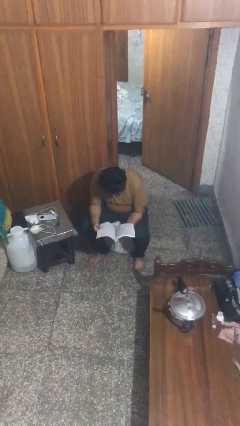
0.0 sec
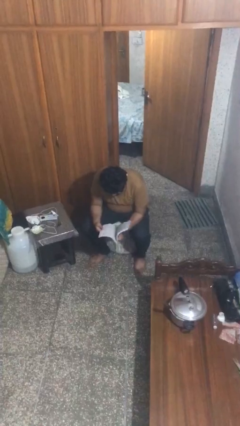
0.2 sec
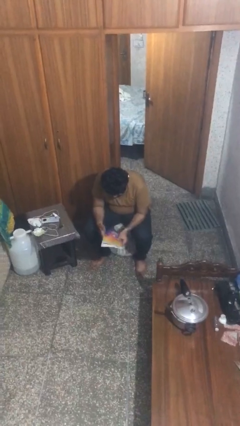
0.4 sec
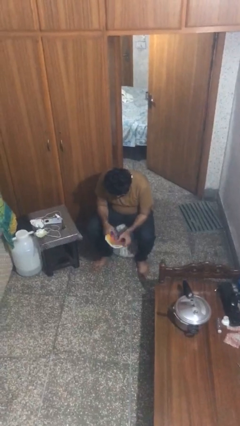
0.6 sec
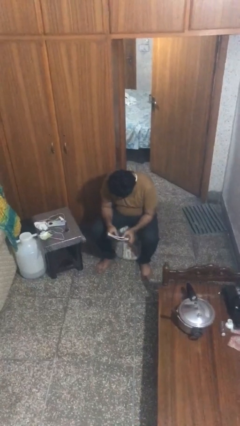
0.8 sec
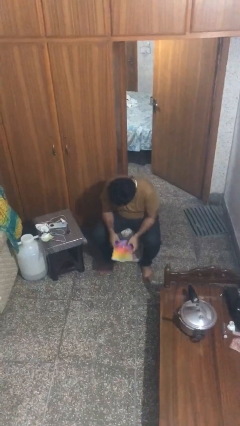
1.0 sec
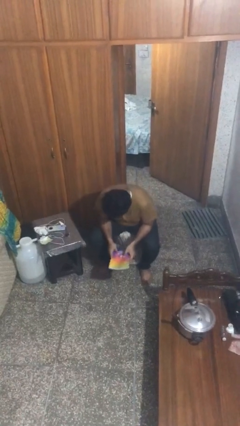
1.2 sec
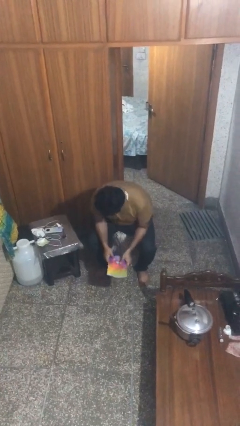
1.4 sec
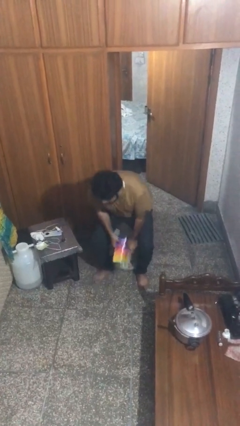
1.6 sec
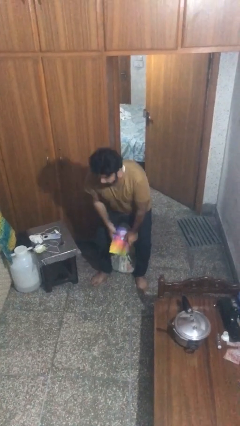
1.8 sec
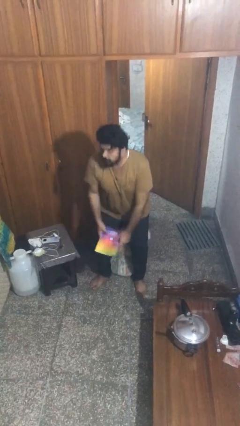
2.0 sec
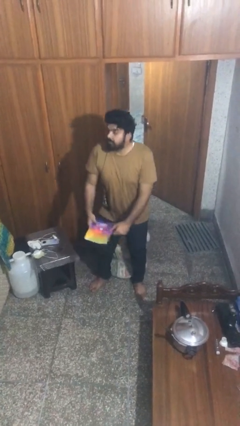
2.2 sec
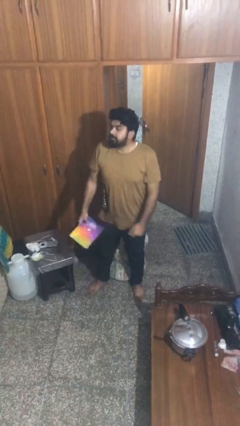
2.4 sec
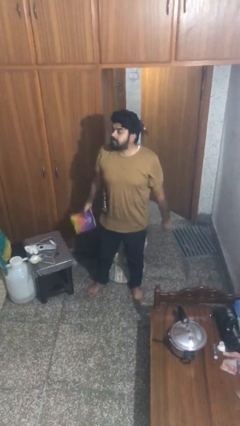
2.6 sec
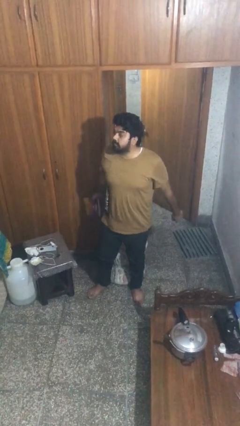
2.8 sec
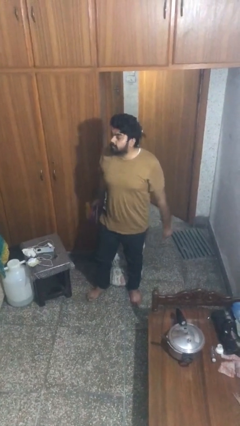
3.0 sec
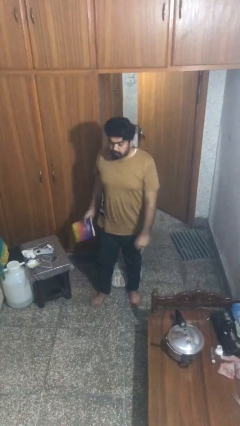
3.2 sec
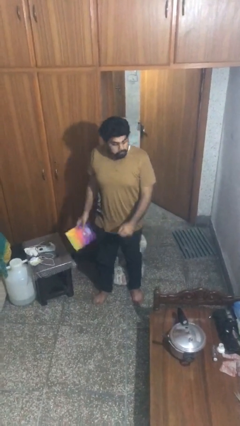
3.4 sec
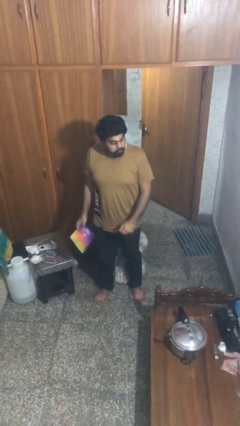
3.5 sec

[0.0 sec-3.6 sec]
person stands up

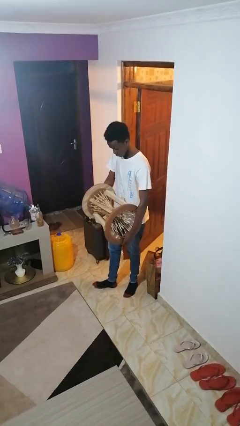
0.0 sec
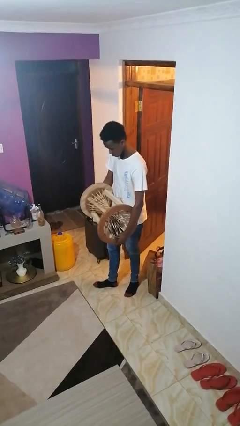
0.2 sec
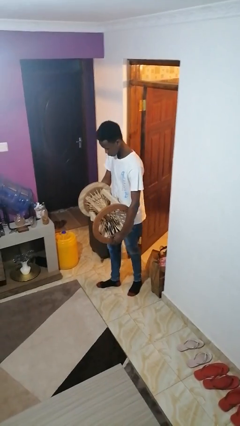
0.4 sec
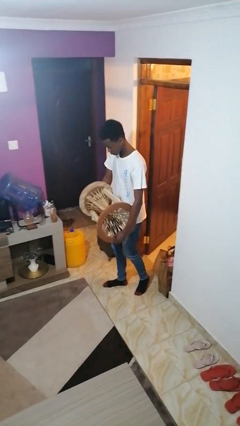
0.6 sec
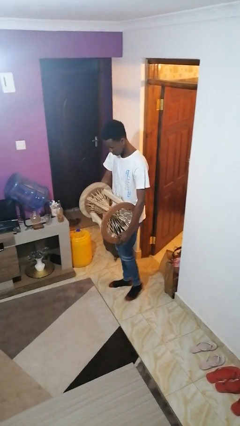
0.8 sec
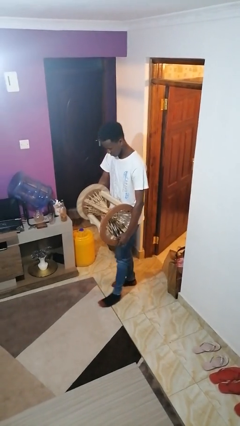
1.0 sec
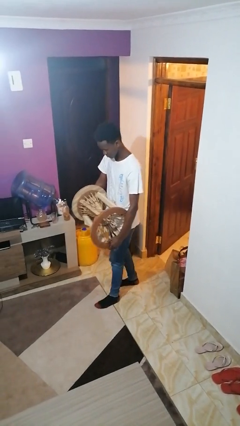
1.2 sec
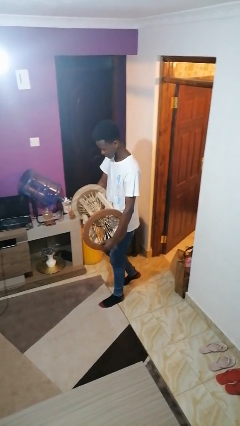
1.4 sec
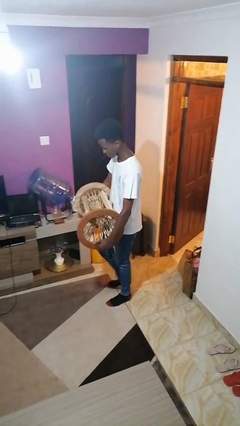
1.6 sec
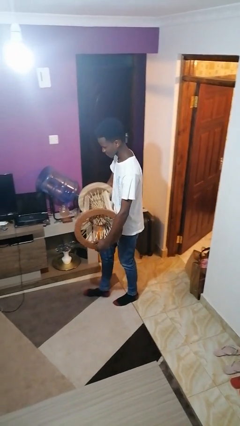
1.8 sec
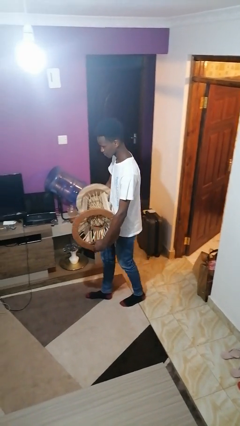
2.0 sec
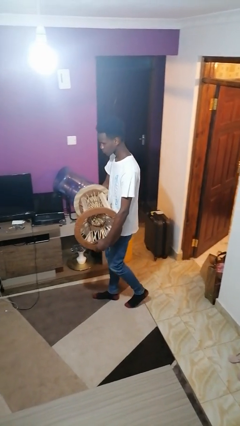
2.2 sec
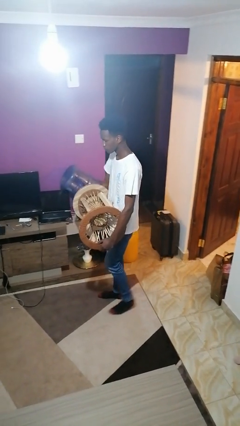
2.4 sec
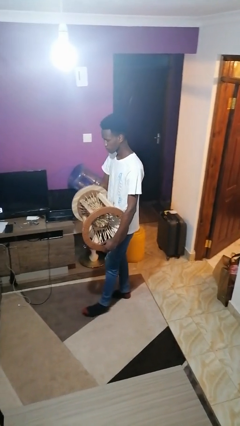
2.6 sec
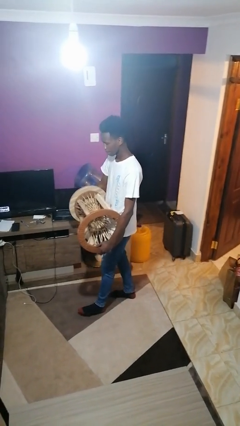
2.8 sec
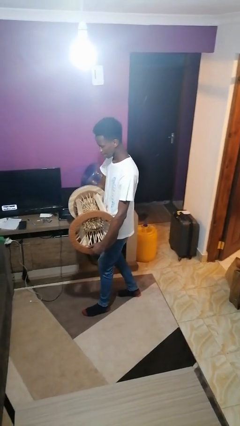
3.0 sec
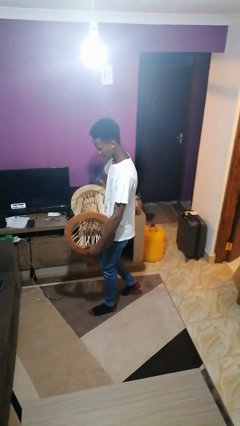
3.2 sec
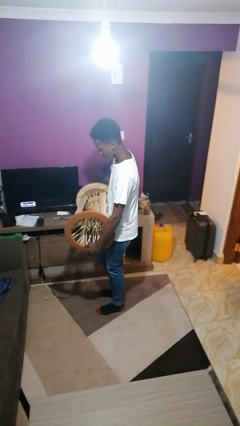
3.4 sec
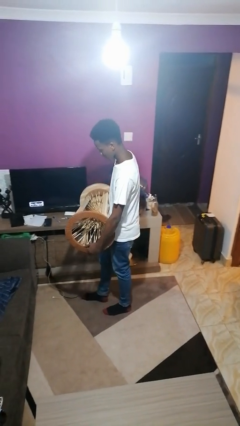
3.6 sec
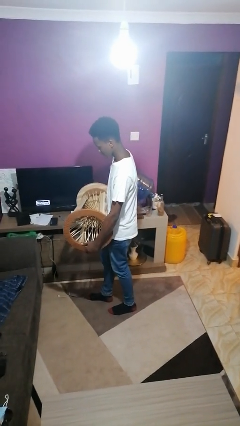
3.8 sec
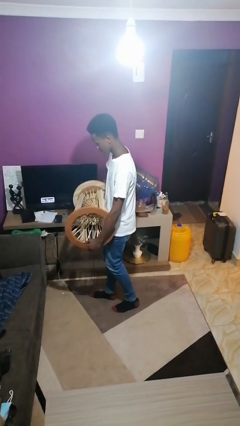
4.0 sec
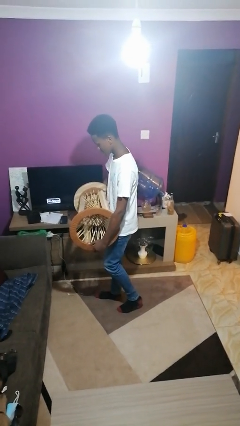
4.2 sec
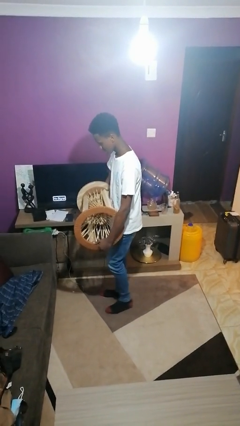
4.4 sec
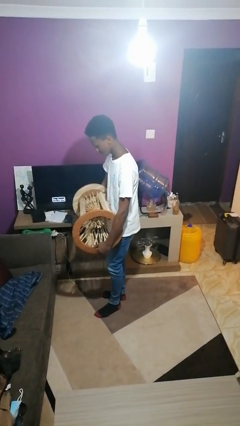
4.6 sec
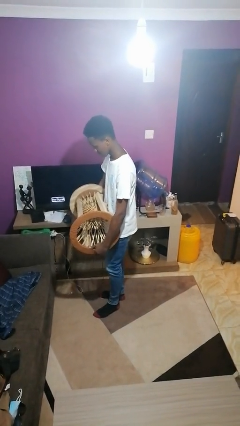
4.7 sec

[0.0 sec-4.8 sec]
person carries furniture

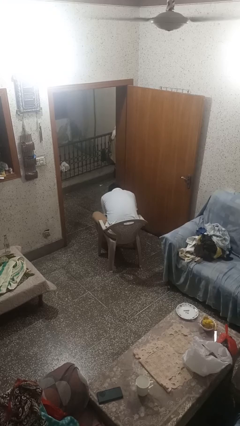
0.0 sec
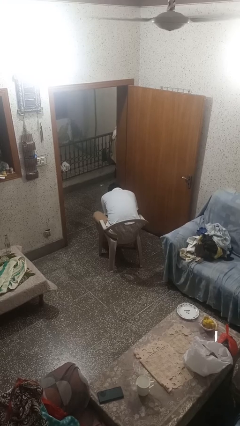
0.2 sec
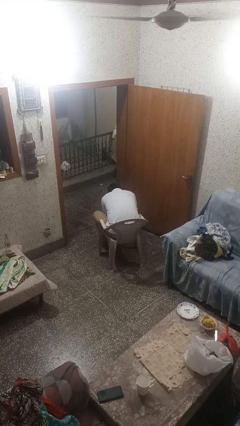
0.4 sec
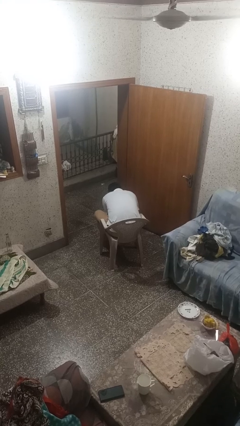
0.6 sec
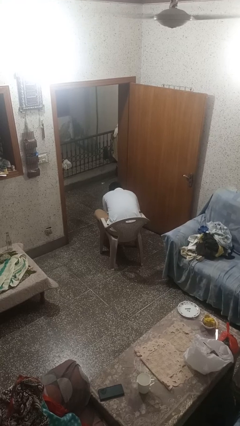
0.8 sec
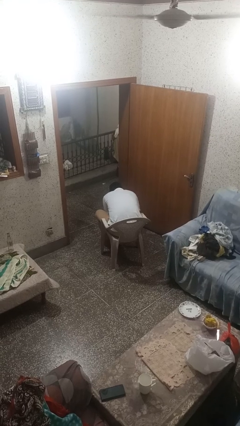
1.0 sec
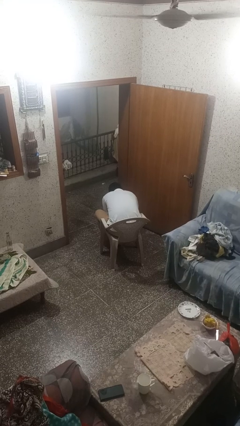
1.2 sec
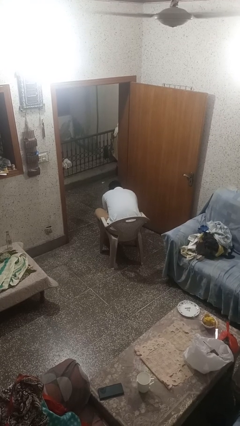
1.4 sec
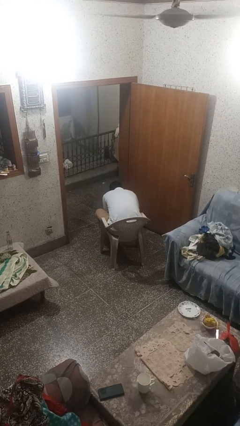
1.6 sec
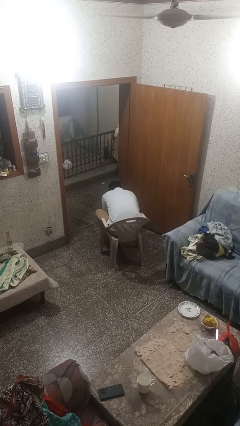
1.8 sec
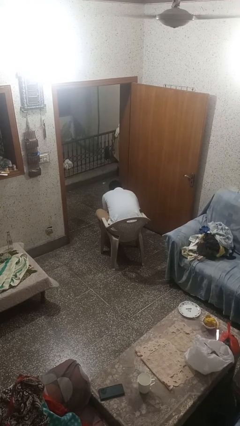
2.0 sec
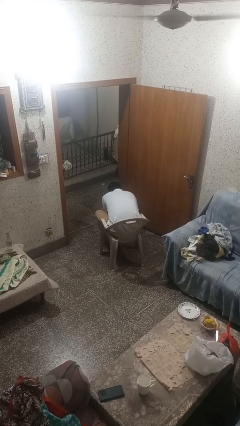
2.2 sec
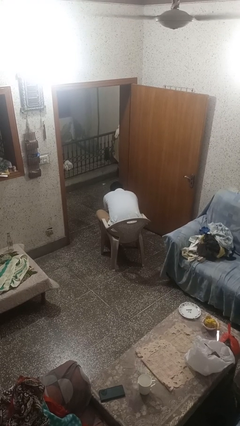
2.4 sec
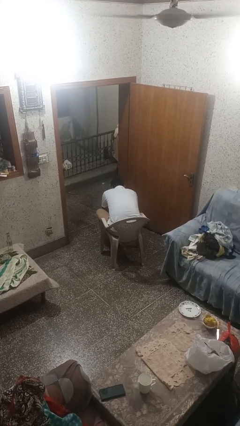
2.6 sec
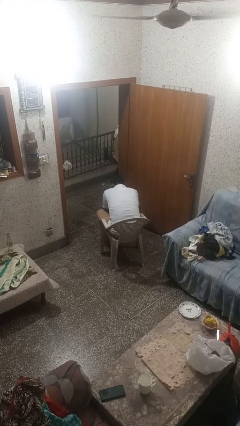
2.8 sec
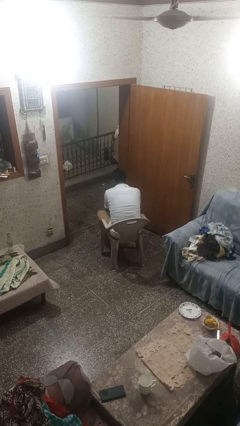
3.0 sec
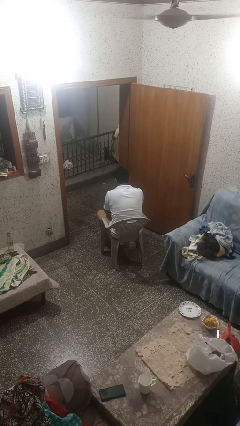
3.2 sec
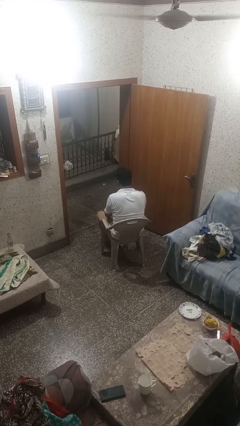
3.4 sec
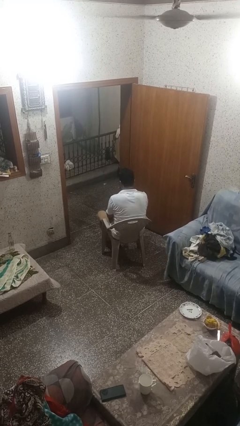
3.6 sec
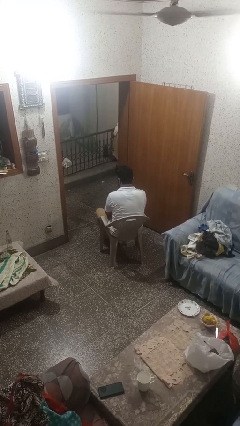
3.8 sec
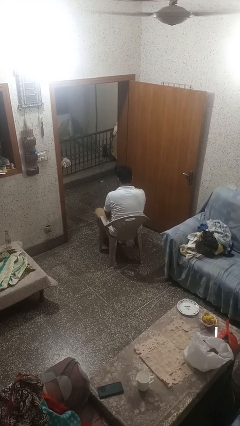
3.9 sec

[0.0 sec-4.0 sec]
person takes off socks

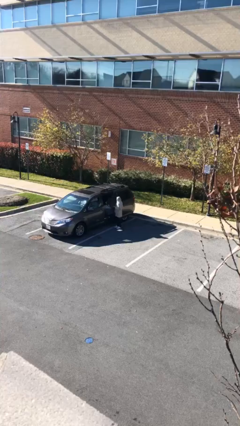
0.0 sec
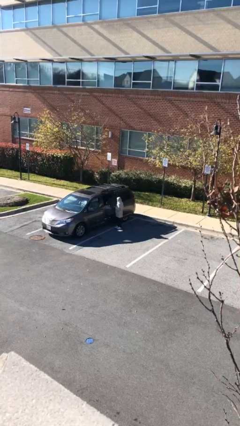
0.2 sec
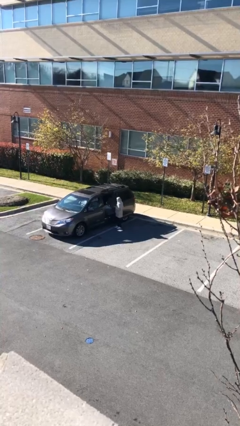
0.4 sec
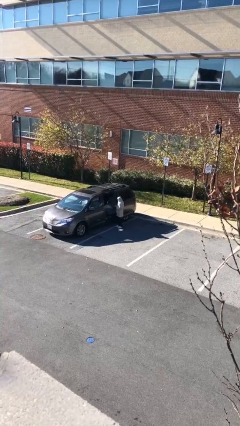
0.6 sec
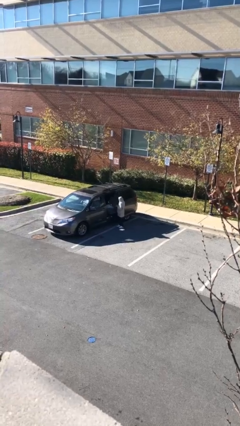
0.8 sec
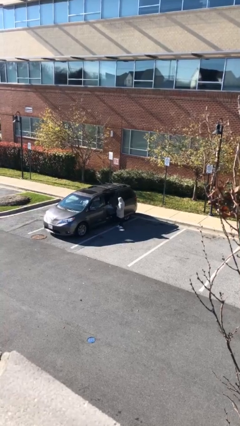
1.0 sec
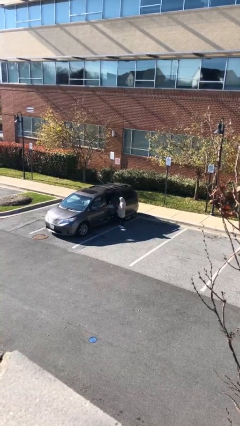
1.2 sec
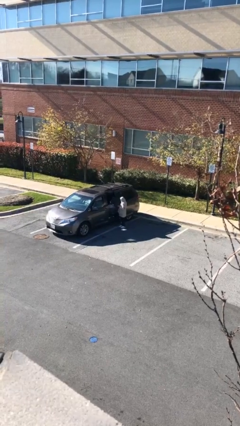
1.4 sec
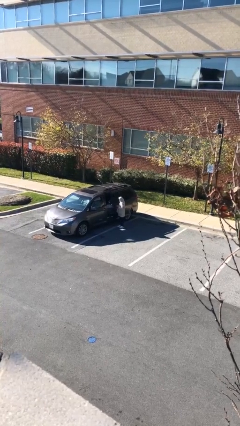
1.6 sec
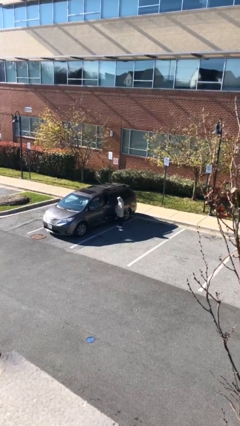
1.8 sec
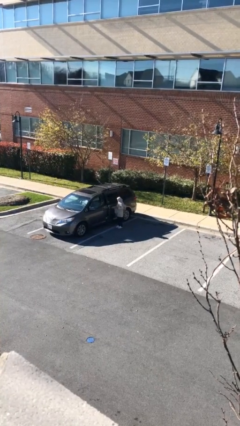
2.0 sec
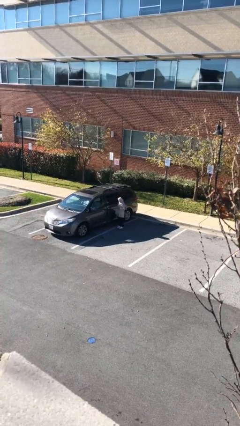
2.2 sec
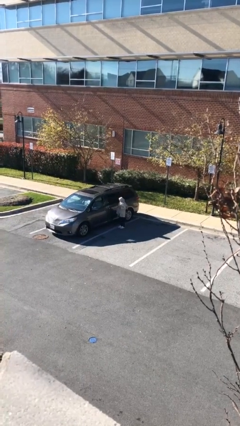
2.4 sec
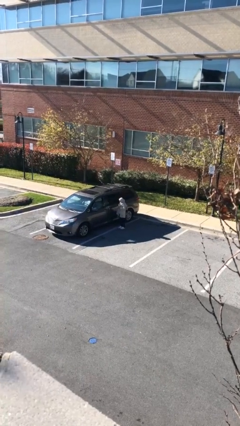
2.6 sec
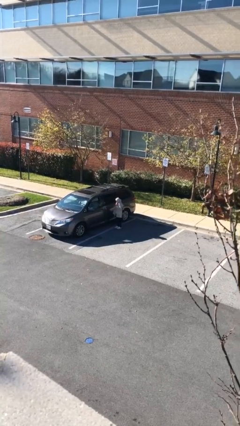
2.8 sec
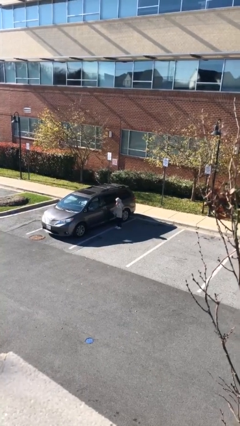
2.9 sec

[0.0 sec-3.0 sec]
person closes car door

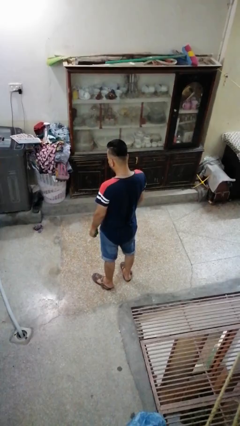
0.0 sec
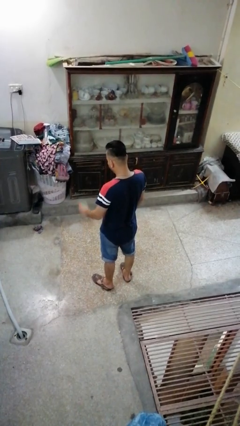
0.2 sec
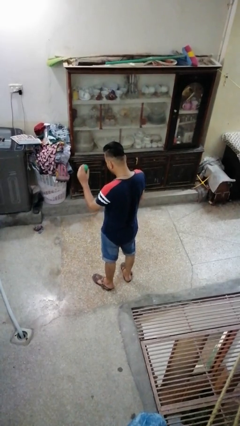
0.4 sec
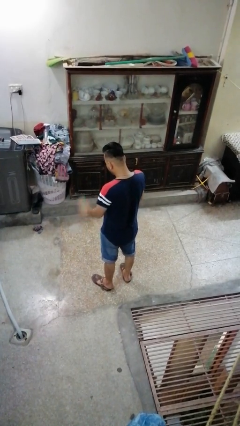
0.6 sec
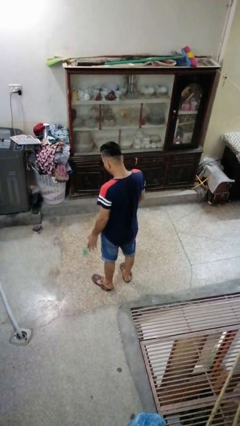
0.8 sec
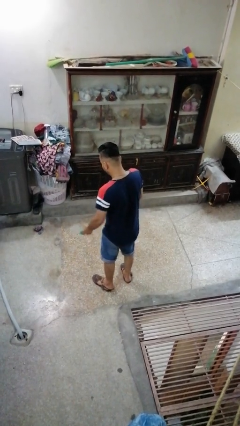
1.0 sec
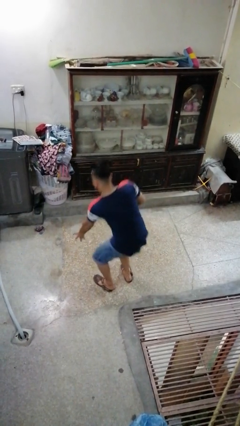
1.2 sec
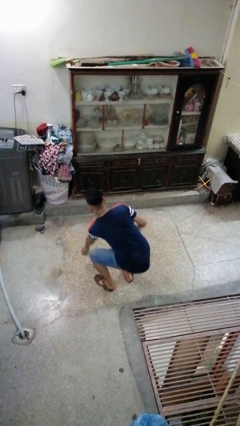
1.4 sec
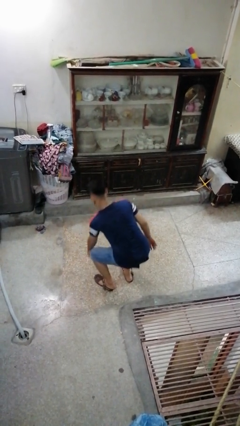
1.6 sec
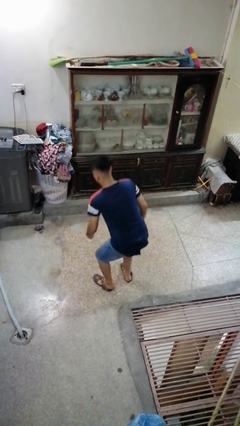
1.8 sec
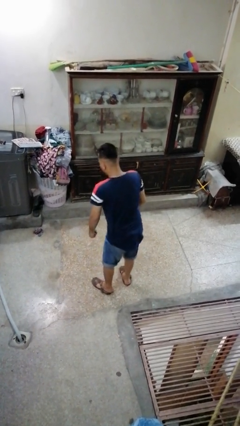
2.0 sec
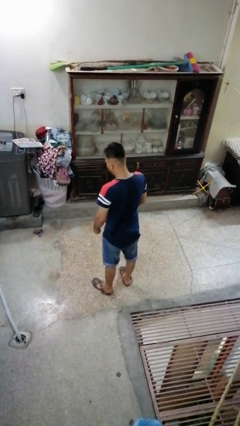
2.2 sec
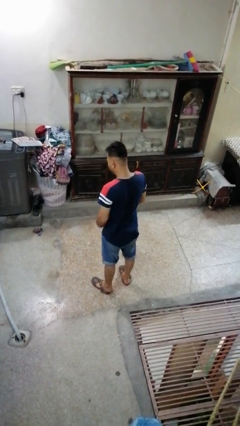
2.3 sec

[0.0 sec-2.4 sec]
person bounces ball on floor
